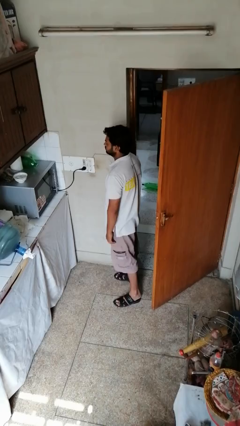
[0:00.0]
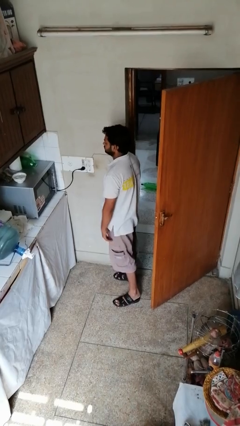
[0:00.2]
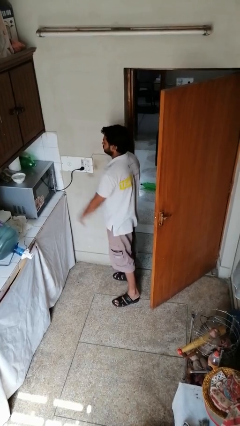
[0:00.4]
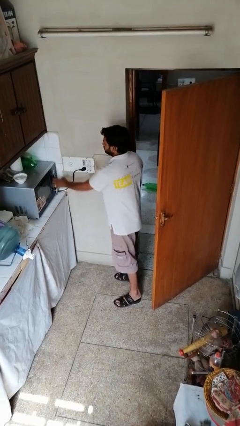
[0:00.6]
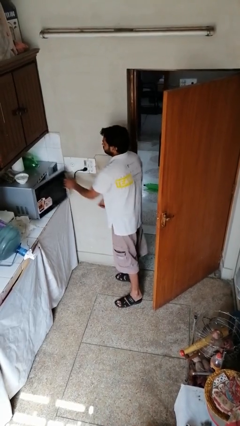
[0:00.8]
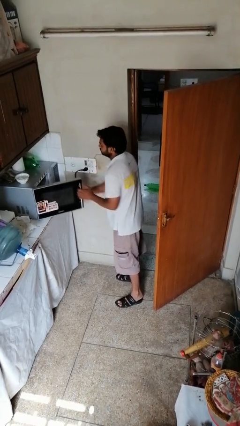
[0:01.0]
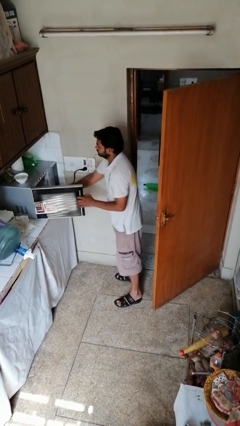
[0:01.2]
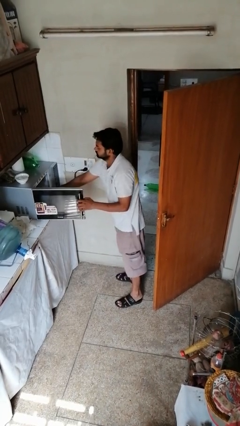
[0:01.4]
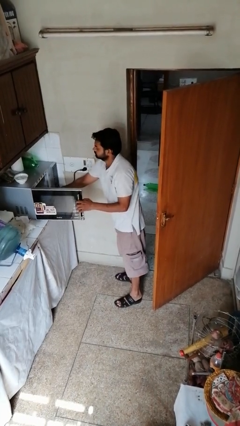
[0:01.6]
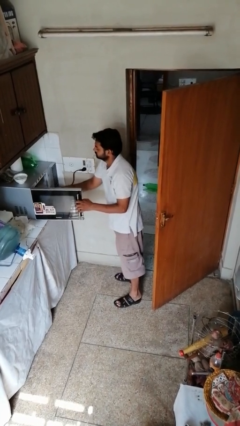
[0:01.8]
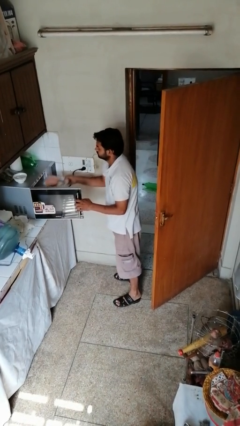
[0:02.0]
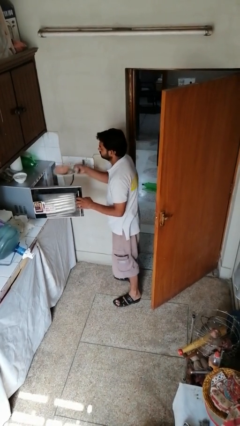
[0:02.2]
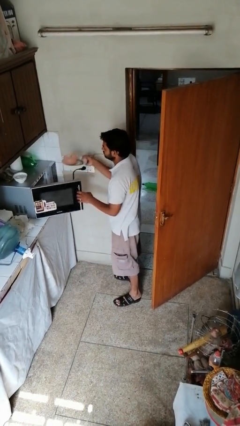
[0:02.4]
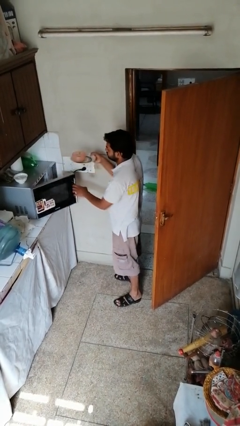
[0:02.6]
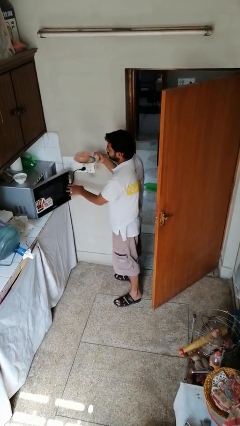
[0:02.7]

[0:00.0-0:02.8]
person takes object from microwave

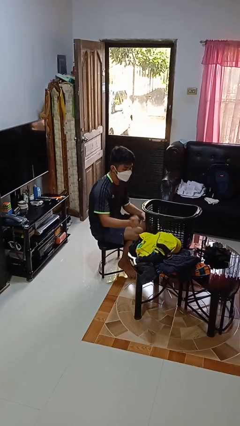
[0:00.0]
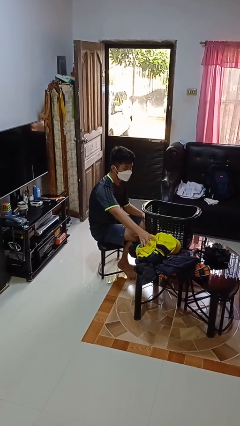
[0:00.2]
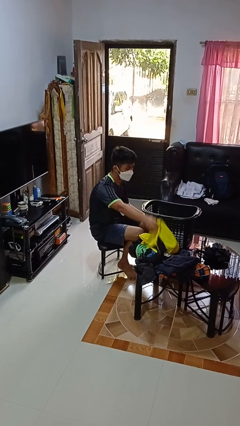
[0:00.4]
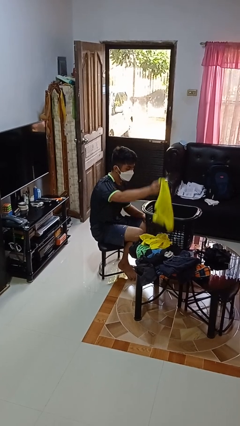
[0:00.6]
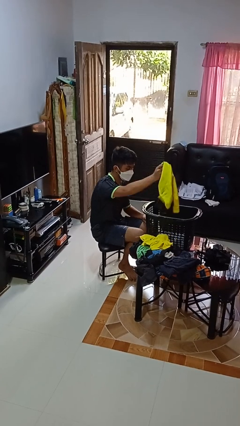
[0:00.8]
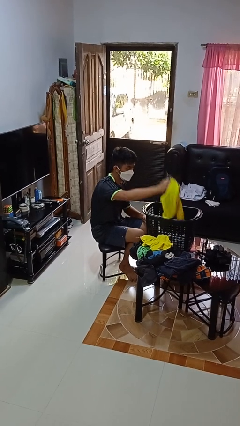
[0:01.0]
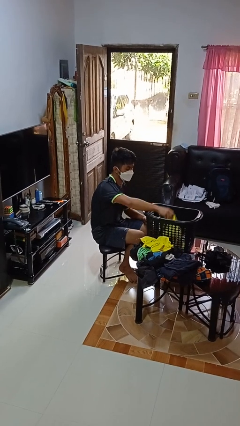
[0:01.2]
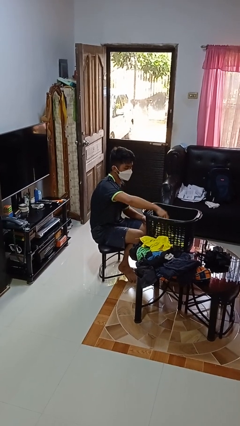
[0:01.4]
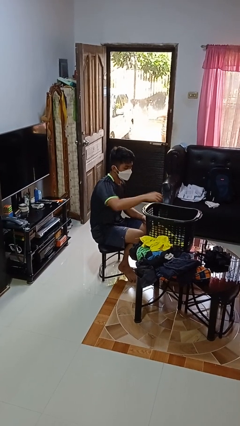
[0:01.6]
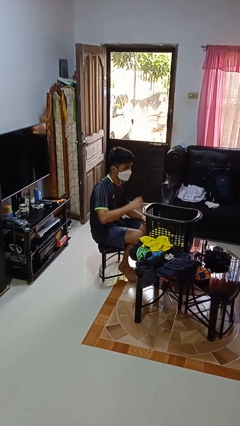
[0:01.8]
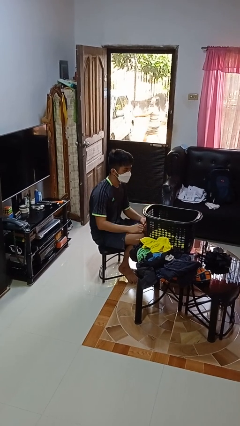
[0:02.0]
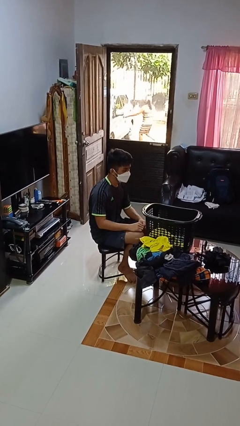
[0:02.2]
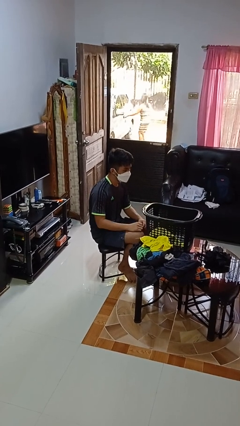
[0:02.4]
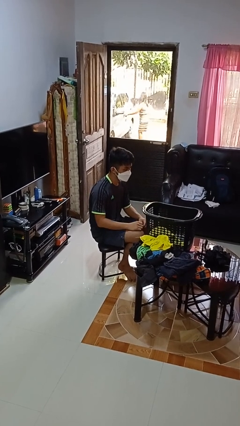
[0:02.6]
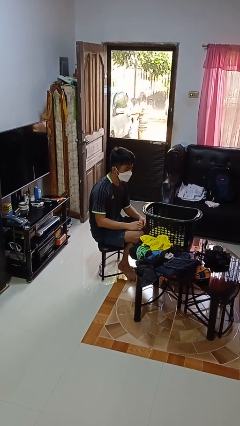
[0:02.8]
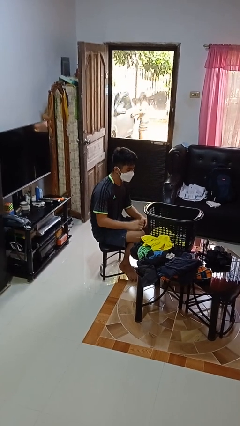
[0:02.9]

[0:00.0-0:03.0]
person puts object into basket

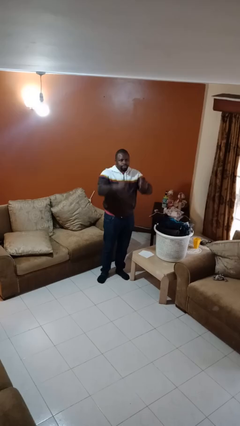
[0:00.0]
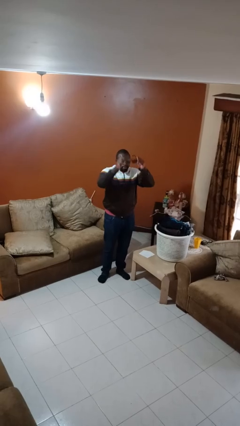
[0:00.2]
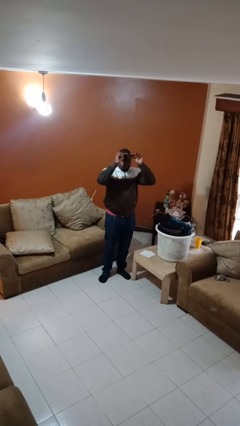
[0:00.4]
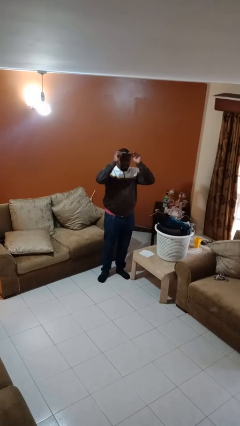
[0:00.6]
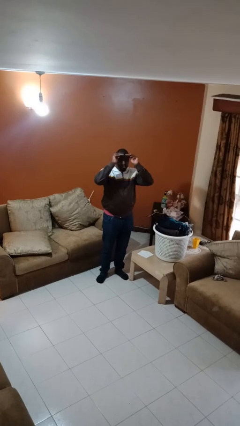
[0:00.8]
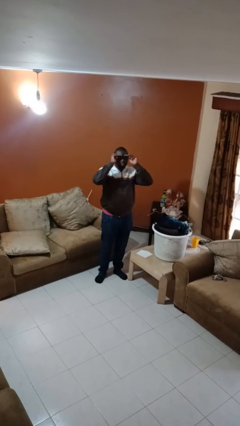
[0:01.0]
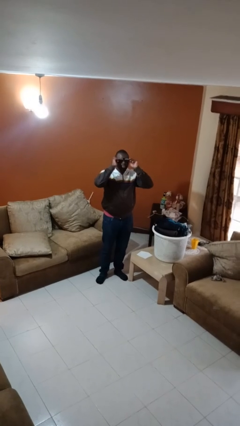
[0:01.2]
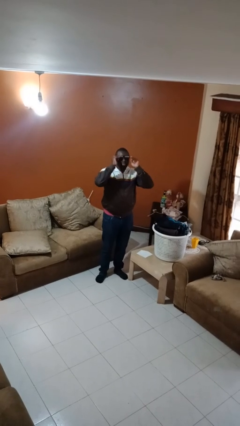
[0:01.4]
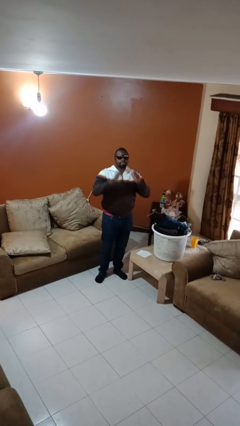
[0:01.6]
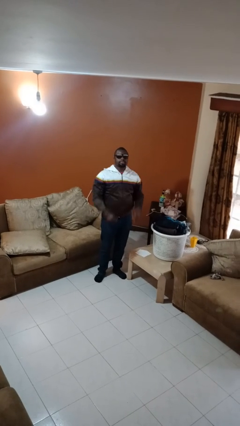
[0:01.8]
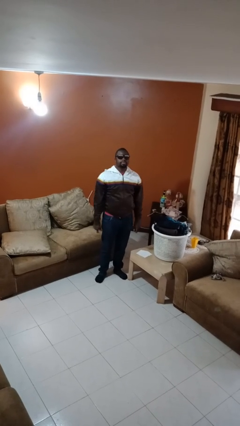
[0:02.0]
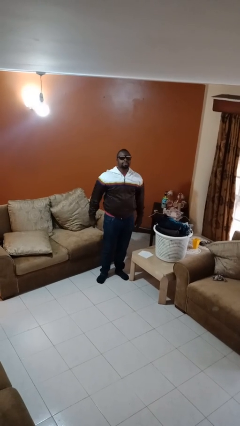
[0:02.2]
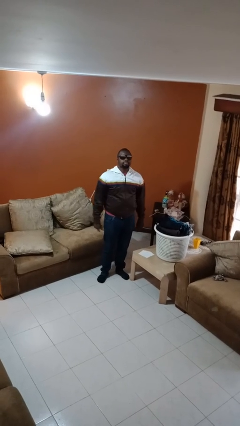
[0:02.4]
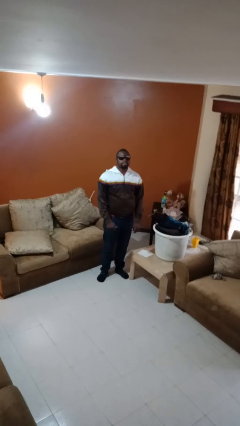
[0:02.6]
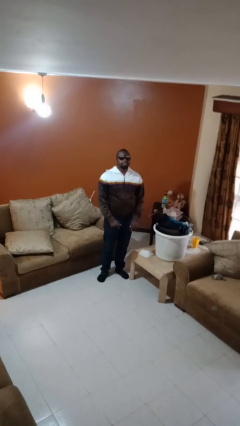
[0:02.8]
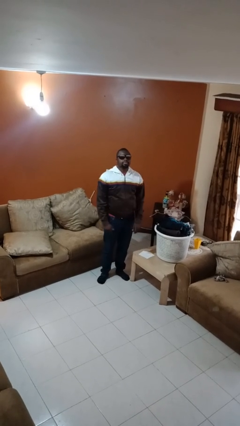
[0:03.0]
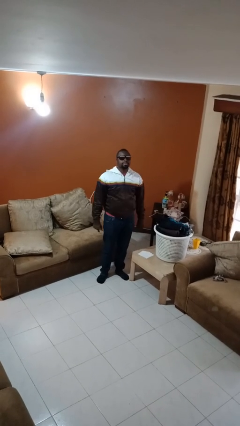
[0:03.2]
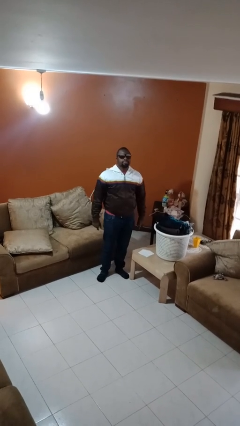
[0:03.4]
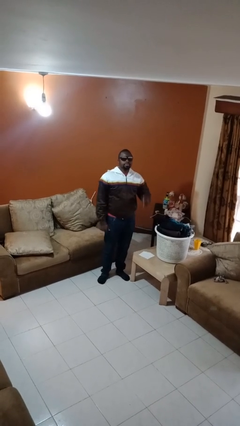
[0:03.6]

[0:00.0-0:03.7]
person puts on sunglasses

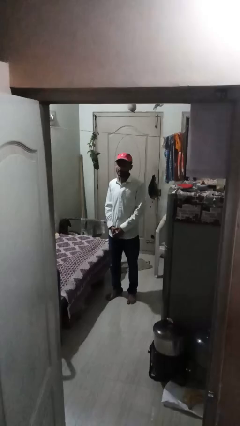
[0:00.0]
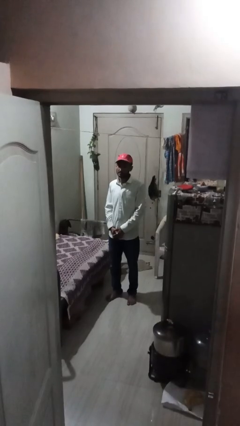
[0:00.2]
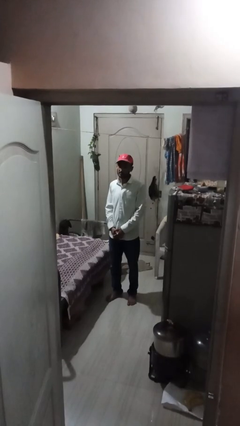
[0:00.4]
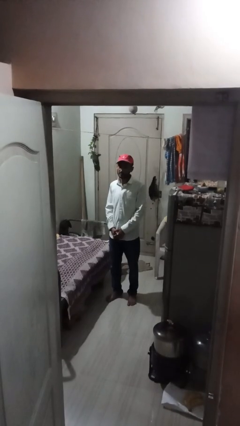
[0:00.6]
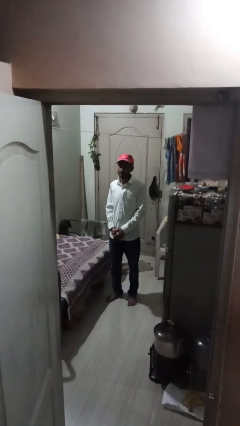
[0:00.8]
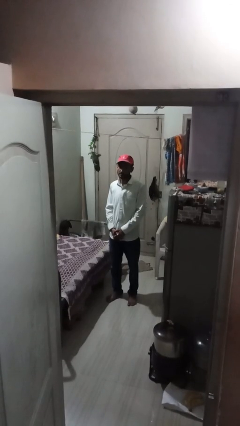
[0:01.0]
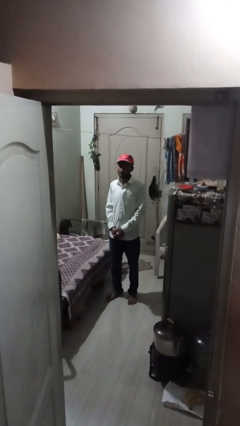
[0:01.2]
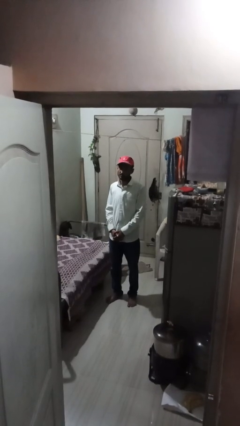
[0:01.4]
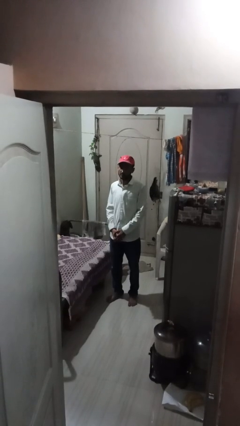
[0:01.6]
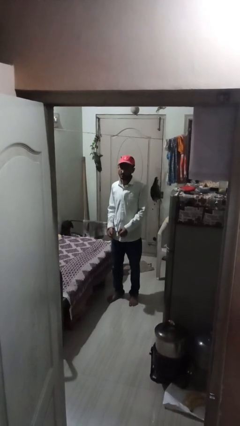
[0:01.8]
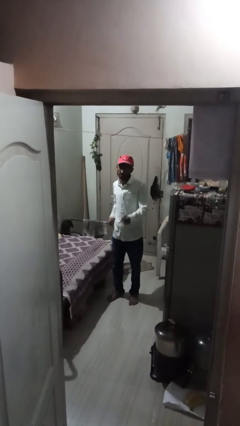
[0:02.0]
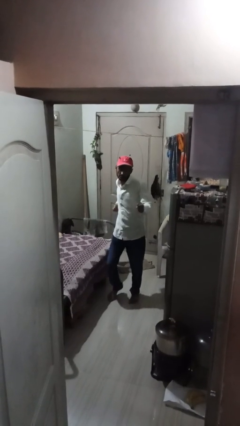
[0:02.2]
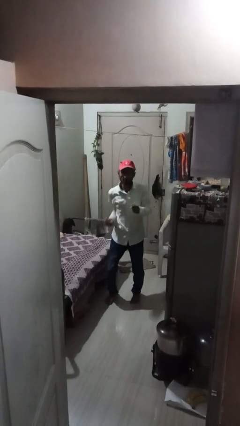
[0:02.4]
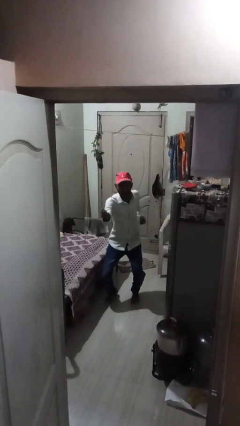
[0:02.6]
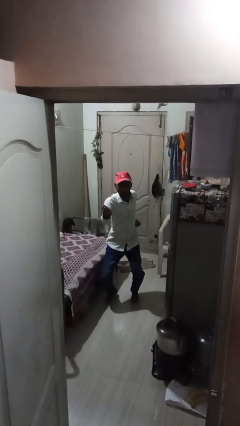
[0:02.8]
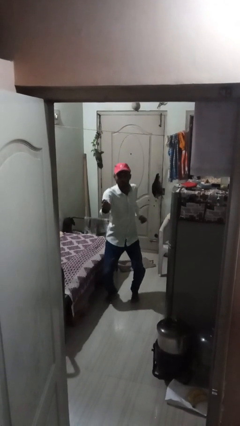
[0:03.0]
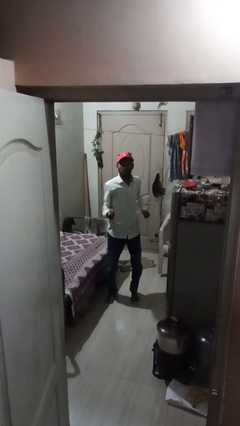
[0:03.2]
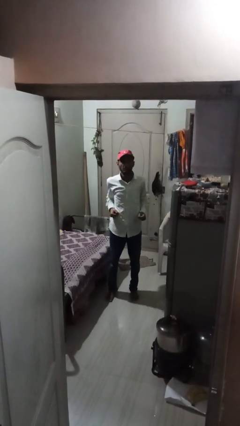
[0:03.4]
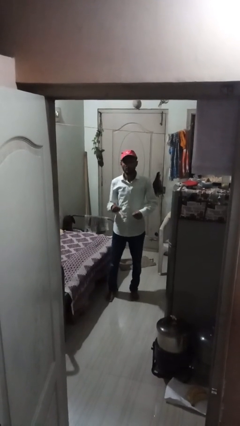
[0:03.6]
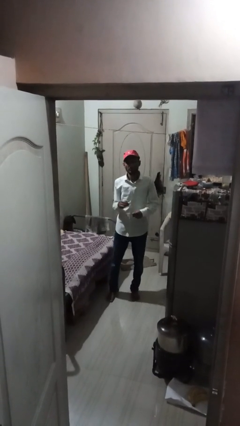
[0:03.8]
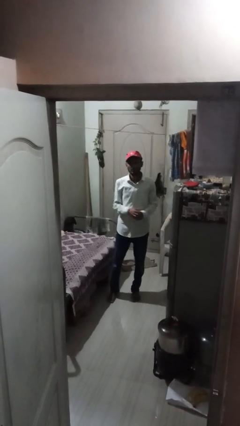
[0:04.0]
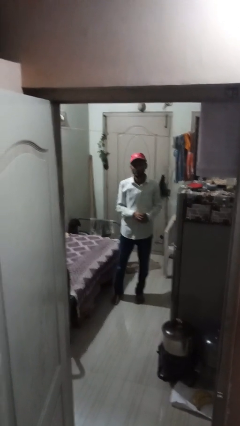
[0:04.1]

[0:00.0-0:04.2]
person punches

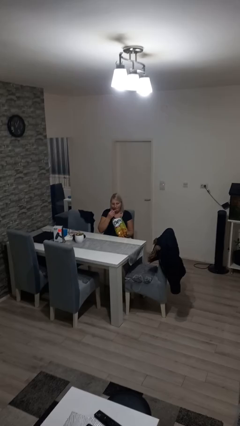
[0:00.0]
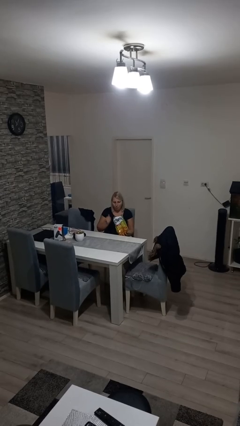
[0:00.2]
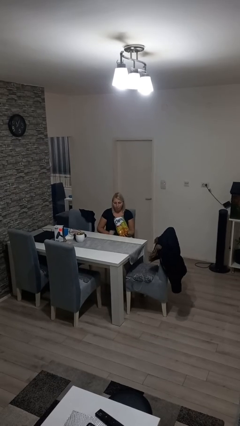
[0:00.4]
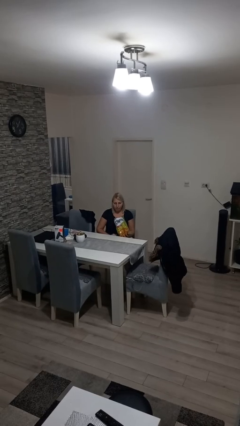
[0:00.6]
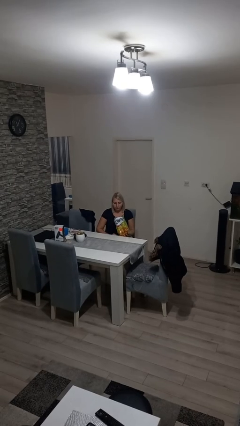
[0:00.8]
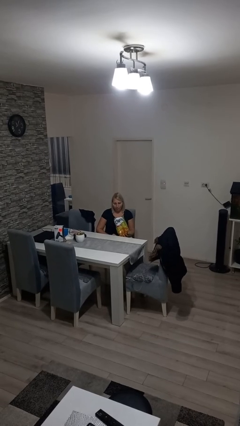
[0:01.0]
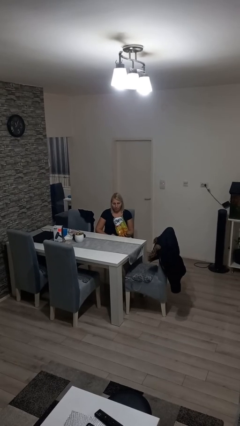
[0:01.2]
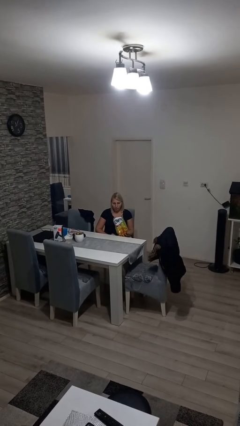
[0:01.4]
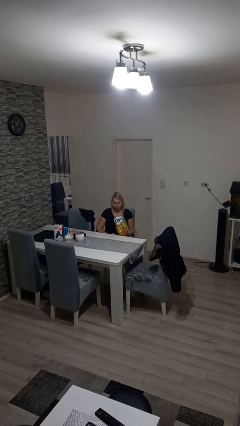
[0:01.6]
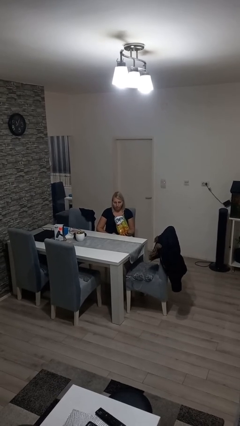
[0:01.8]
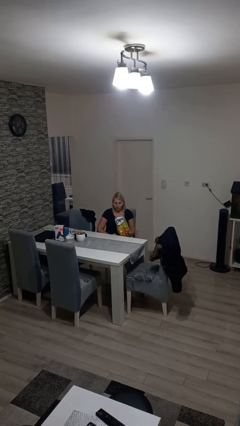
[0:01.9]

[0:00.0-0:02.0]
person eats snack from bag

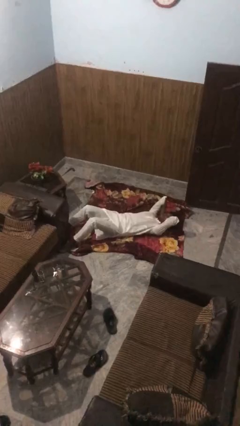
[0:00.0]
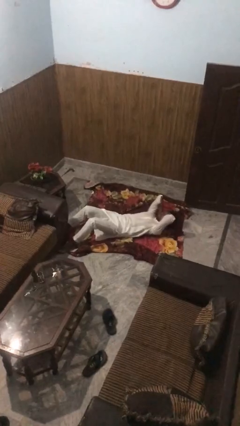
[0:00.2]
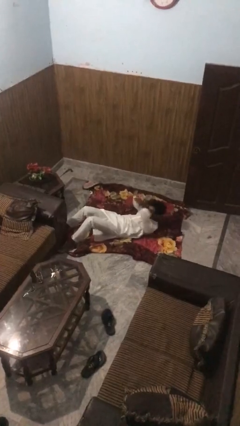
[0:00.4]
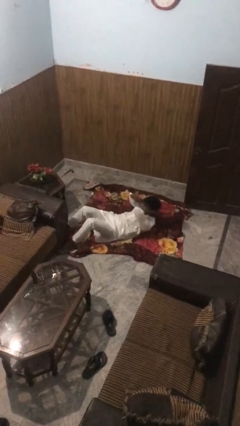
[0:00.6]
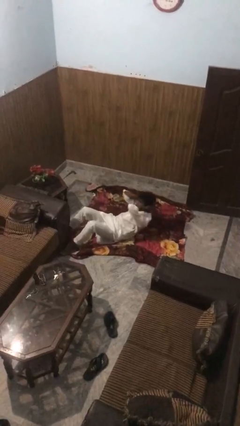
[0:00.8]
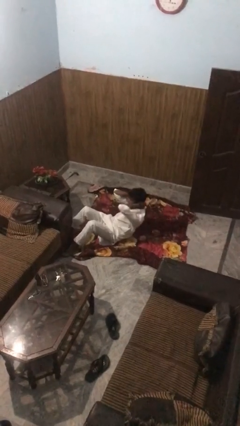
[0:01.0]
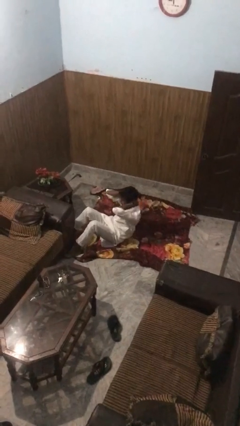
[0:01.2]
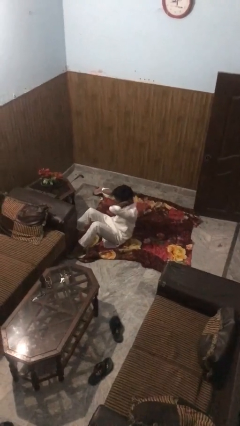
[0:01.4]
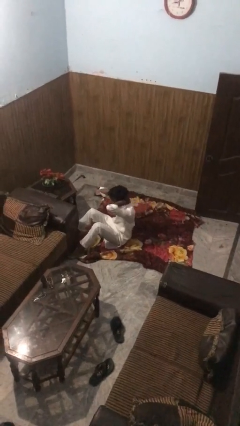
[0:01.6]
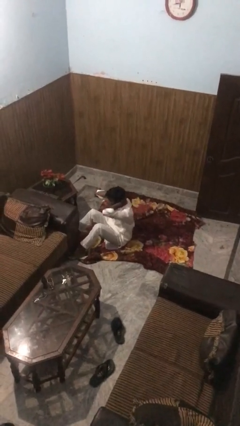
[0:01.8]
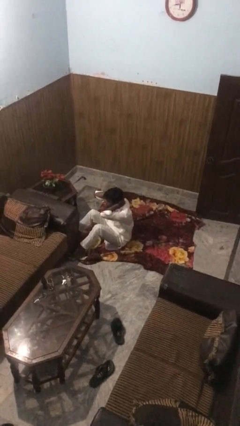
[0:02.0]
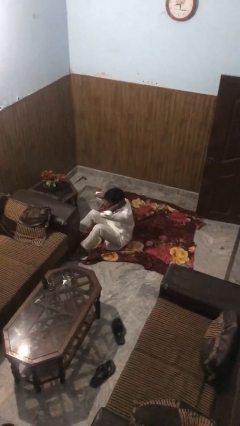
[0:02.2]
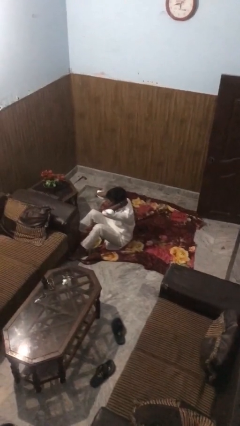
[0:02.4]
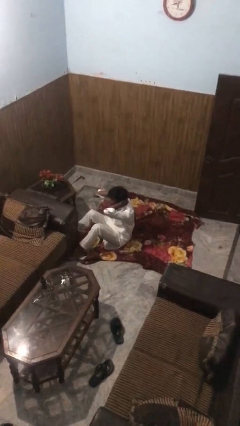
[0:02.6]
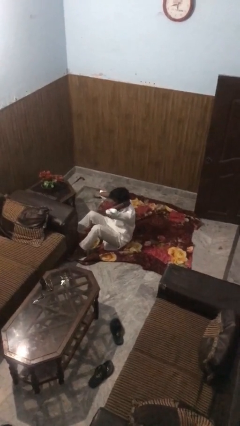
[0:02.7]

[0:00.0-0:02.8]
person exercises with situp
